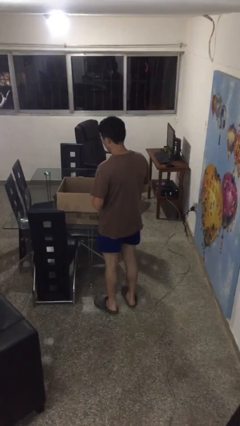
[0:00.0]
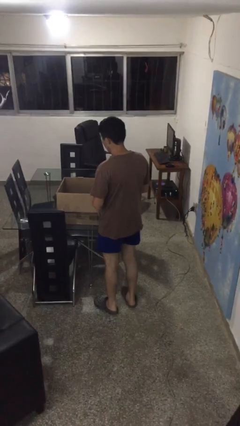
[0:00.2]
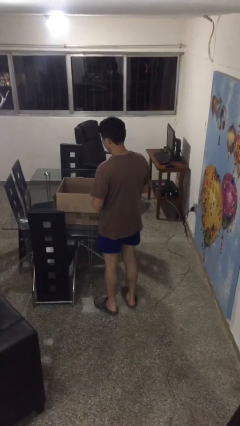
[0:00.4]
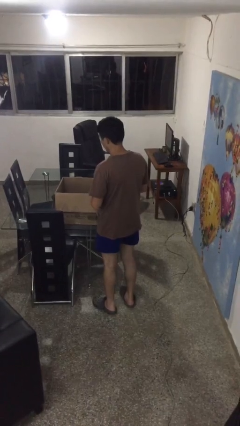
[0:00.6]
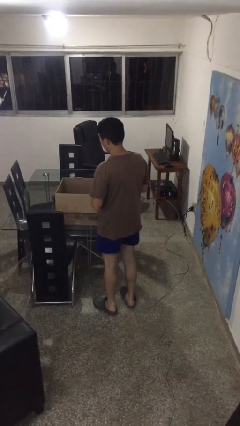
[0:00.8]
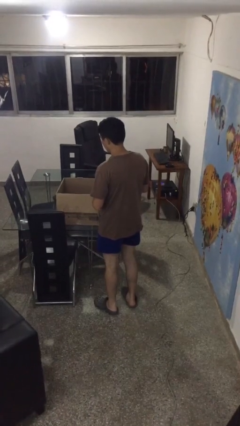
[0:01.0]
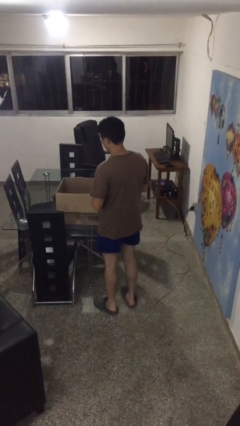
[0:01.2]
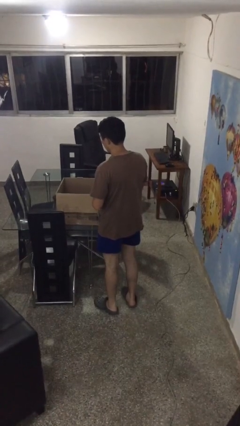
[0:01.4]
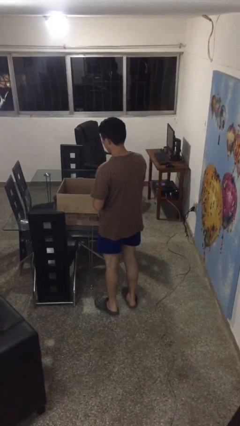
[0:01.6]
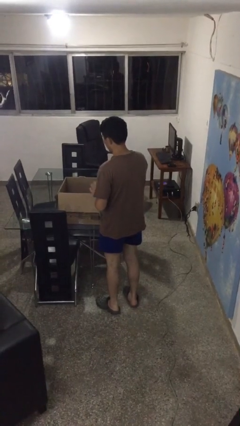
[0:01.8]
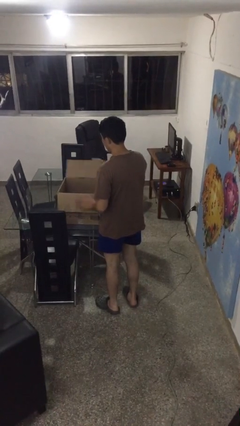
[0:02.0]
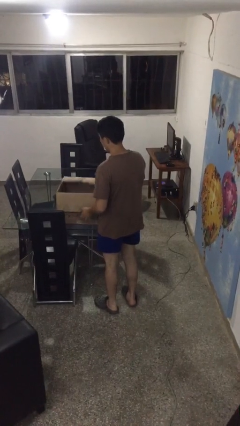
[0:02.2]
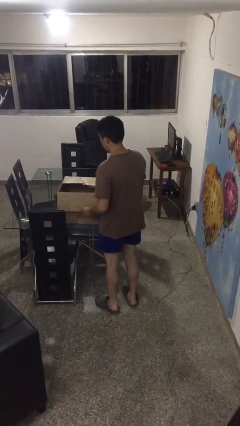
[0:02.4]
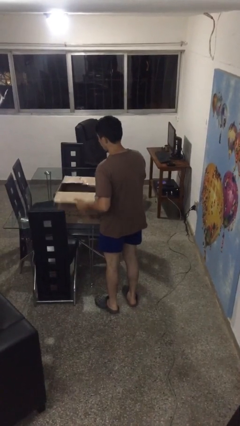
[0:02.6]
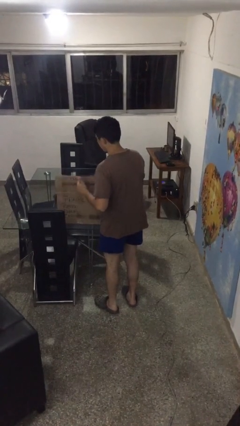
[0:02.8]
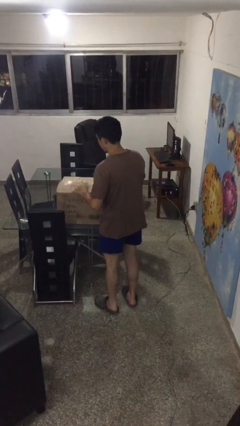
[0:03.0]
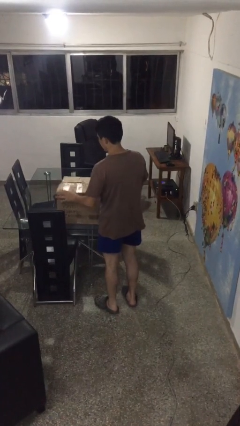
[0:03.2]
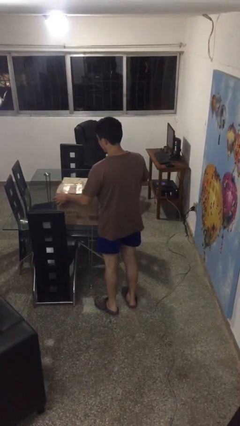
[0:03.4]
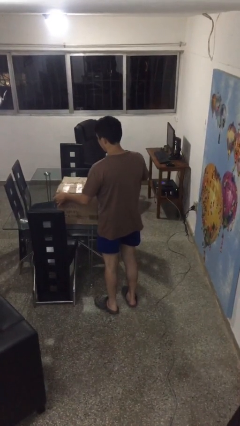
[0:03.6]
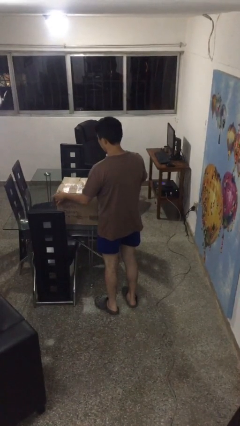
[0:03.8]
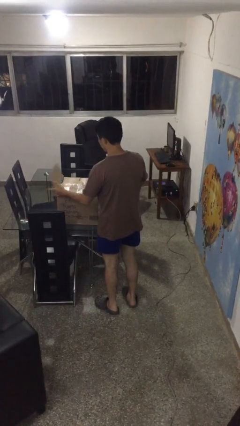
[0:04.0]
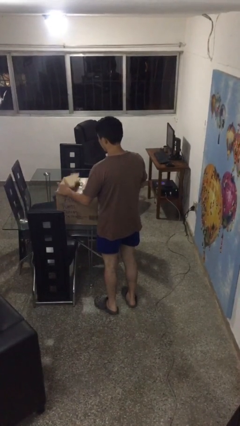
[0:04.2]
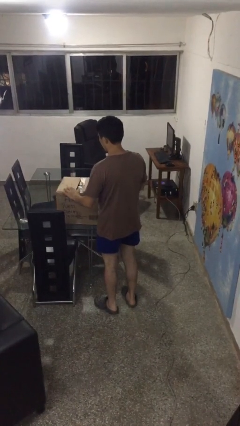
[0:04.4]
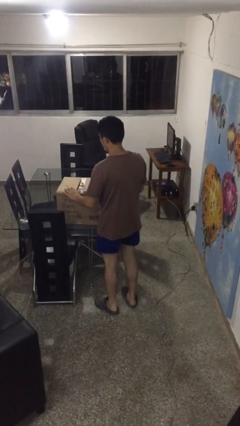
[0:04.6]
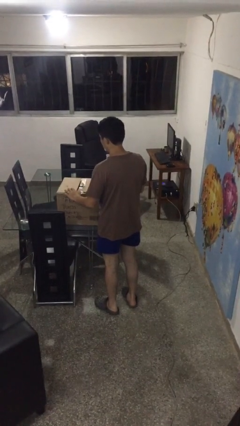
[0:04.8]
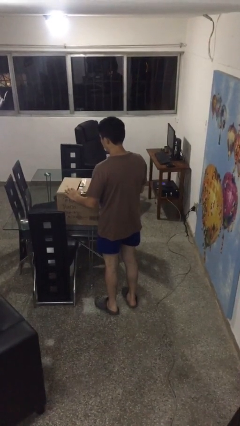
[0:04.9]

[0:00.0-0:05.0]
person closes box

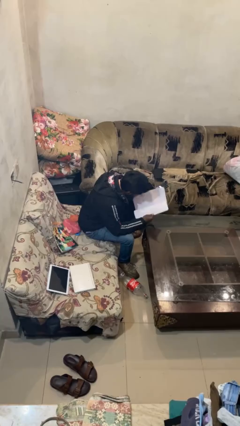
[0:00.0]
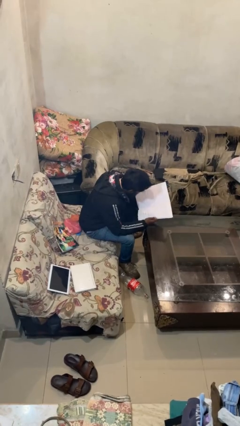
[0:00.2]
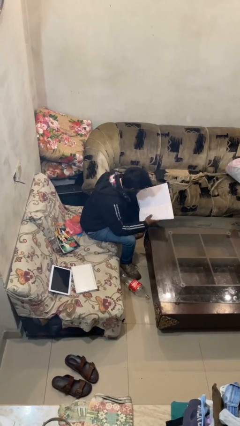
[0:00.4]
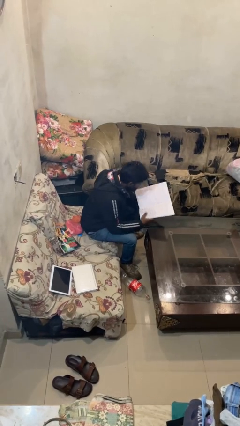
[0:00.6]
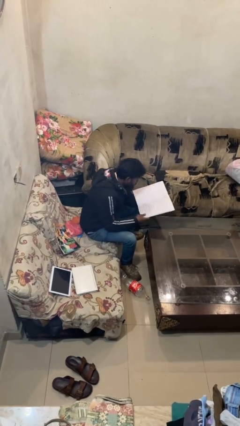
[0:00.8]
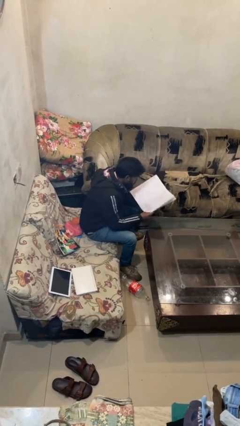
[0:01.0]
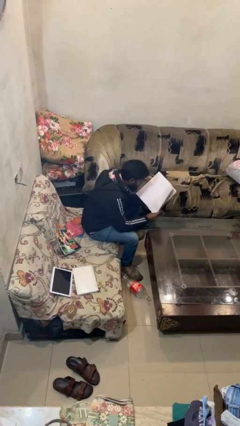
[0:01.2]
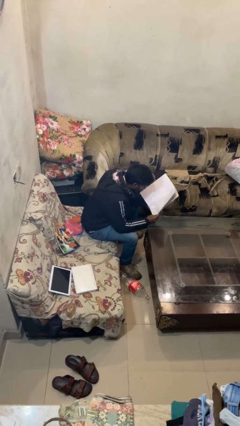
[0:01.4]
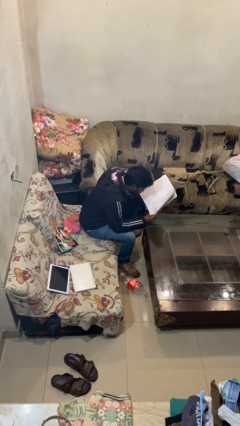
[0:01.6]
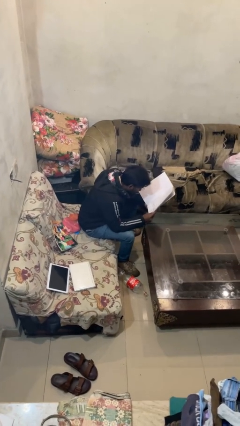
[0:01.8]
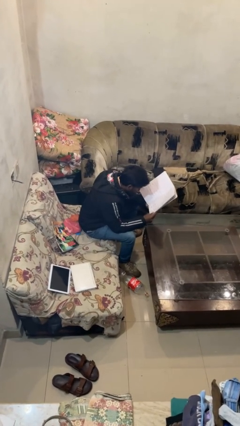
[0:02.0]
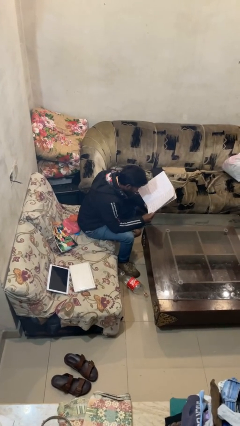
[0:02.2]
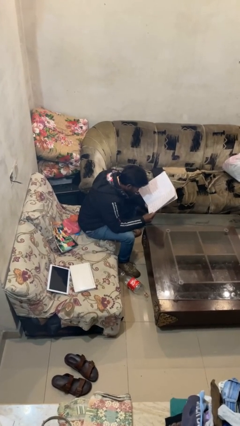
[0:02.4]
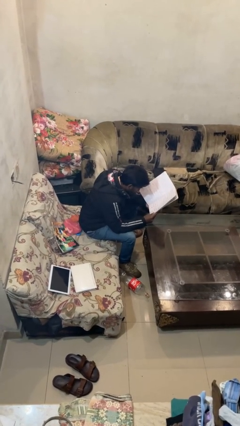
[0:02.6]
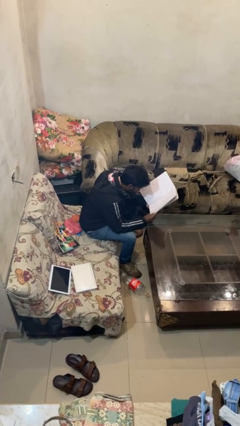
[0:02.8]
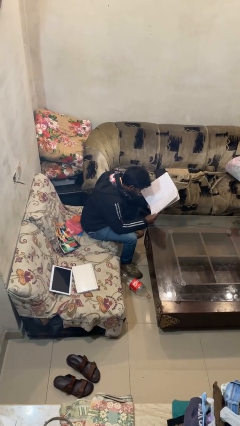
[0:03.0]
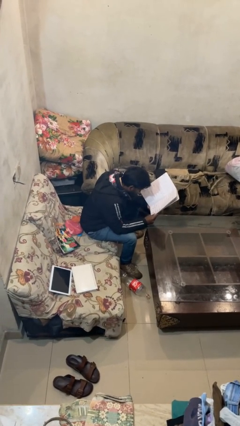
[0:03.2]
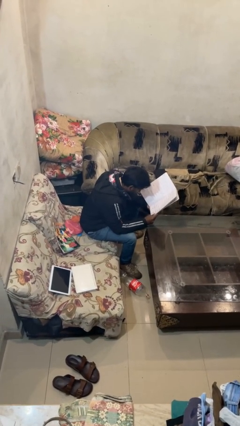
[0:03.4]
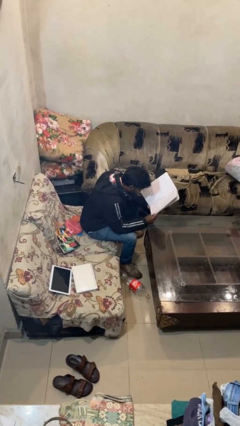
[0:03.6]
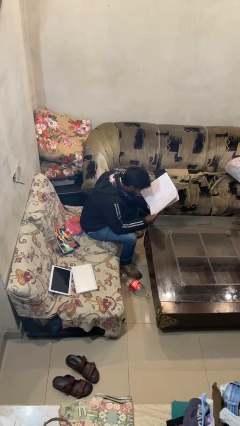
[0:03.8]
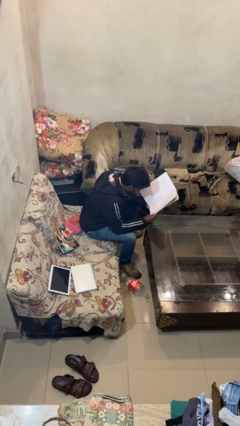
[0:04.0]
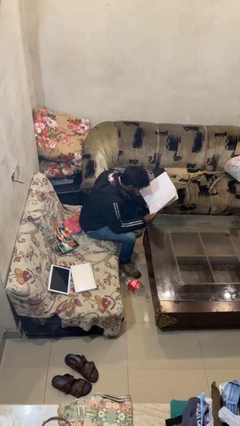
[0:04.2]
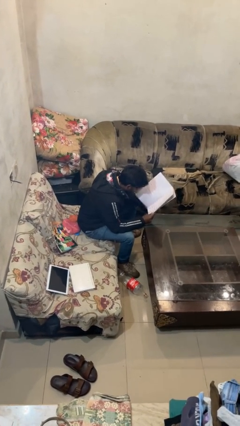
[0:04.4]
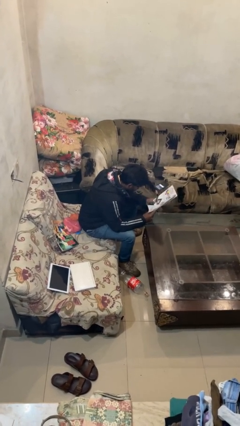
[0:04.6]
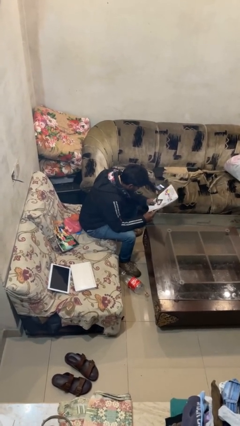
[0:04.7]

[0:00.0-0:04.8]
person reads document

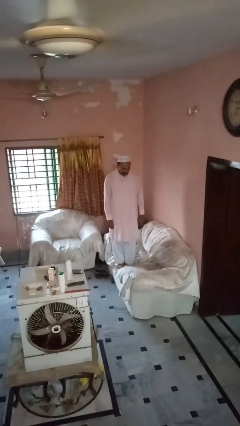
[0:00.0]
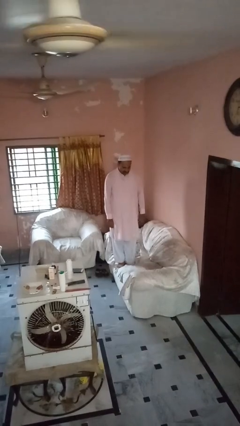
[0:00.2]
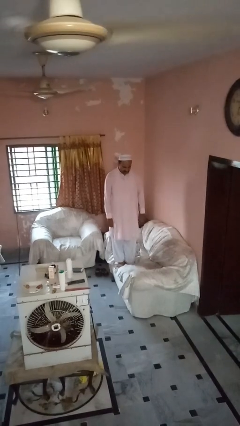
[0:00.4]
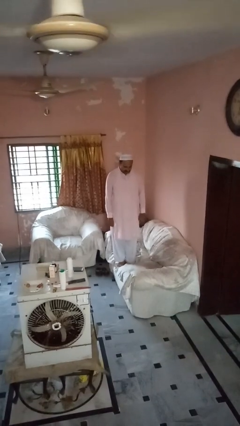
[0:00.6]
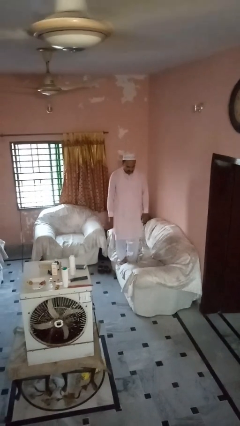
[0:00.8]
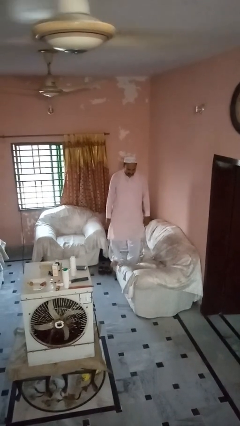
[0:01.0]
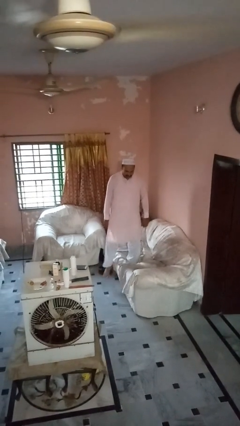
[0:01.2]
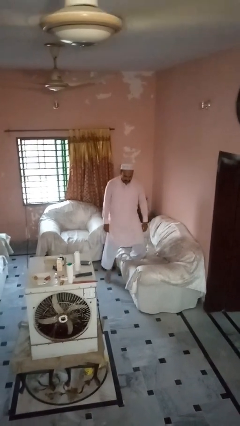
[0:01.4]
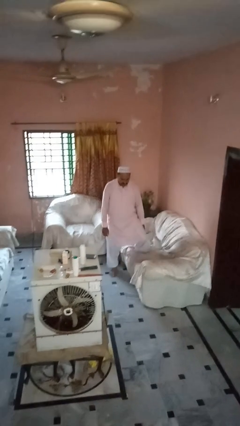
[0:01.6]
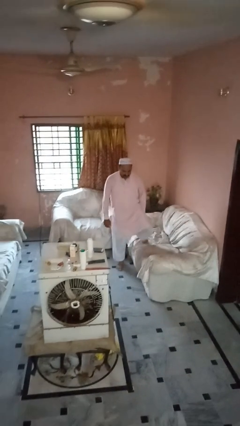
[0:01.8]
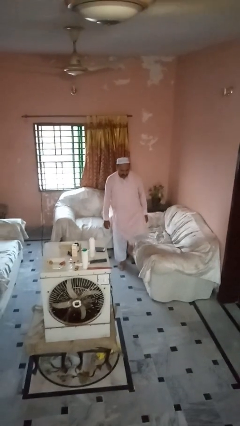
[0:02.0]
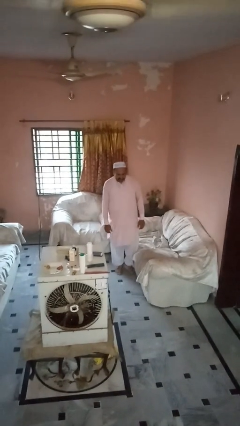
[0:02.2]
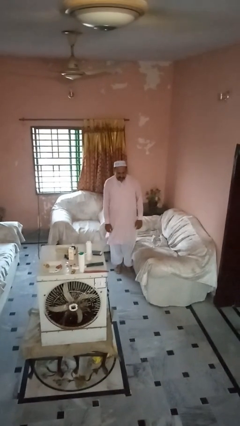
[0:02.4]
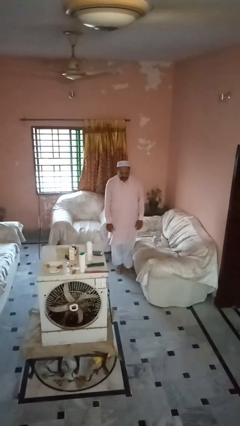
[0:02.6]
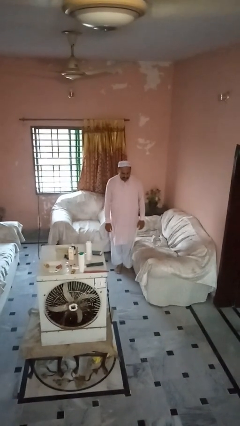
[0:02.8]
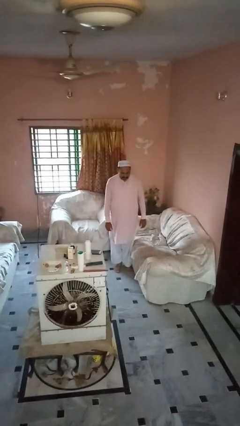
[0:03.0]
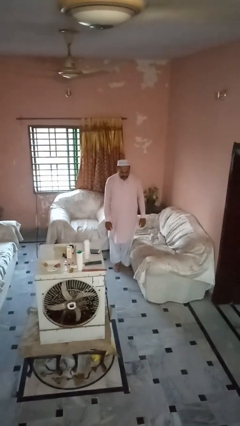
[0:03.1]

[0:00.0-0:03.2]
person climbs off couch

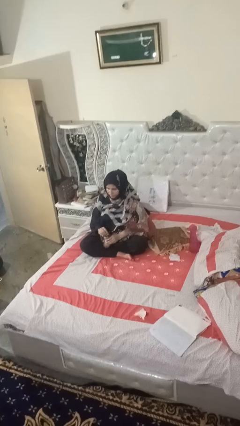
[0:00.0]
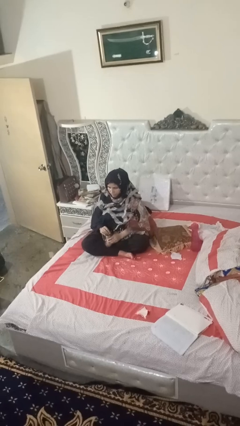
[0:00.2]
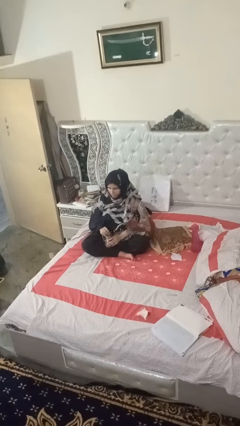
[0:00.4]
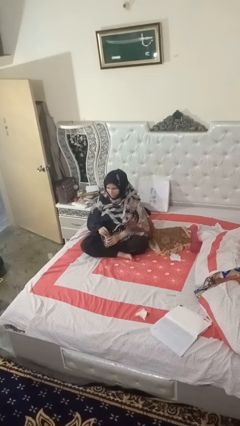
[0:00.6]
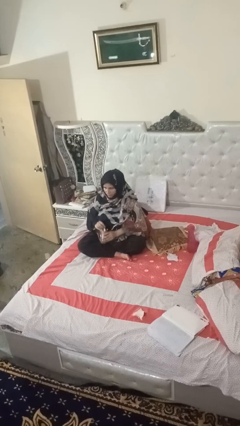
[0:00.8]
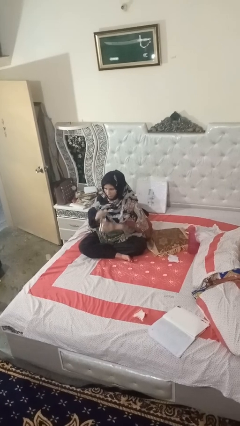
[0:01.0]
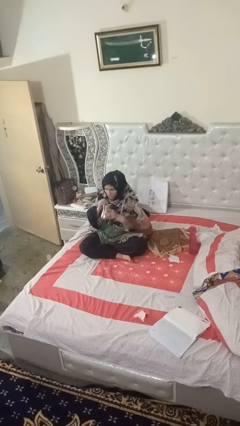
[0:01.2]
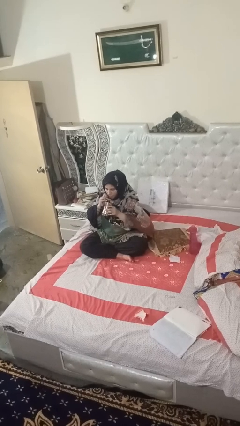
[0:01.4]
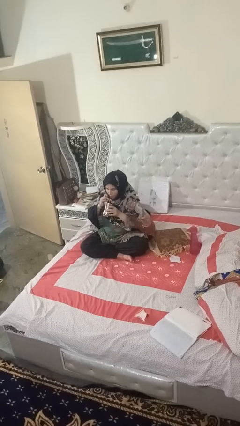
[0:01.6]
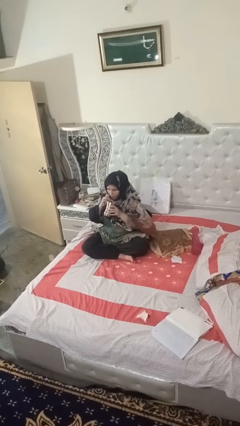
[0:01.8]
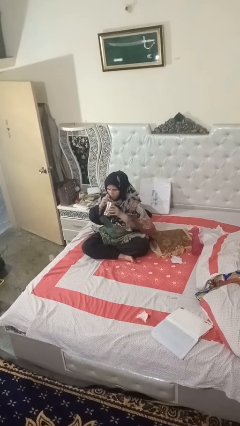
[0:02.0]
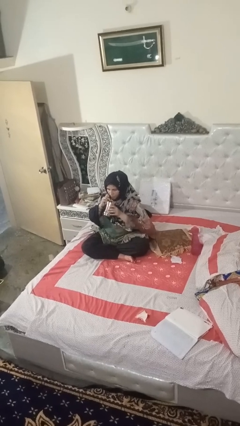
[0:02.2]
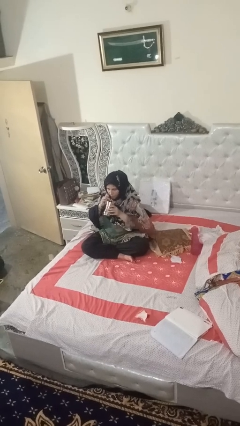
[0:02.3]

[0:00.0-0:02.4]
person drinks from straw

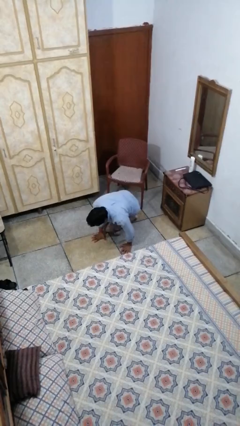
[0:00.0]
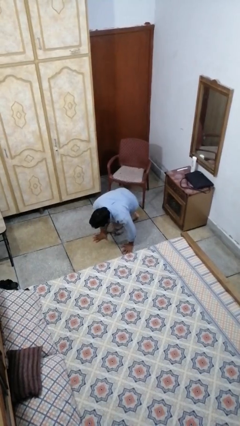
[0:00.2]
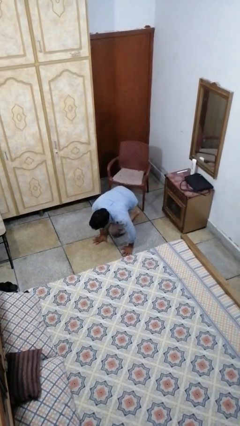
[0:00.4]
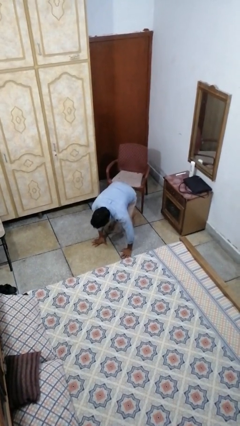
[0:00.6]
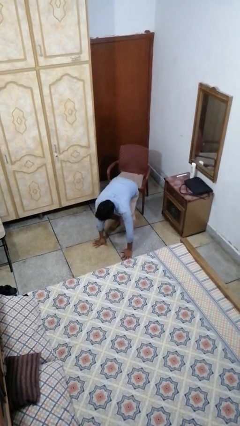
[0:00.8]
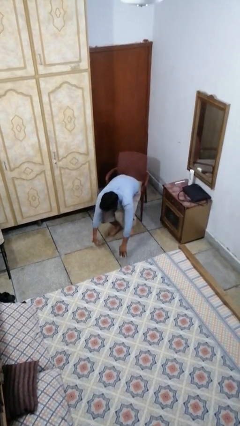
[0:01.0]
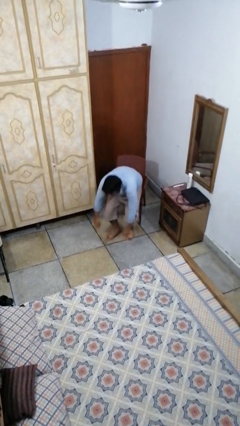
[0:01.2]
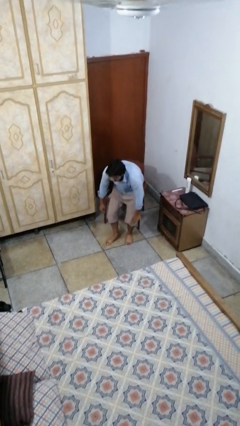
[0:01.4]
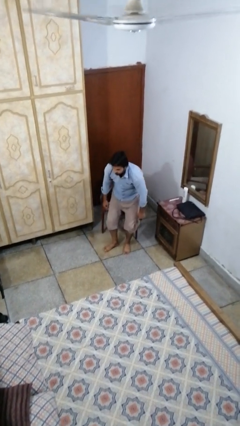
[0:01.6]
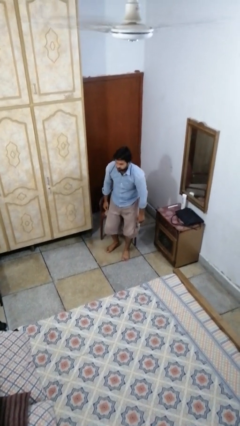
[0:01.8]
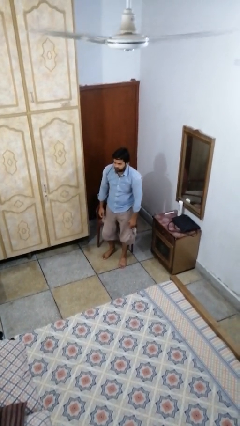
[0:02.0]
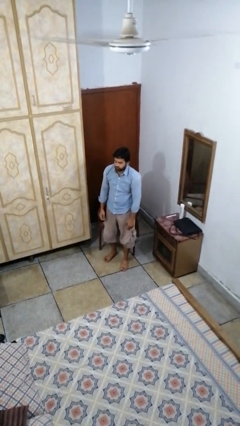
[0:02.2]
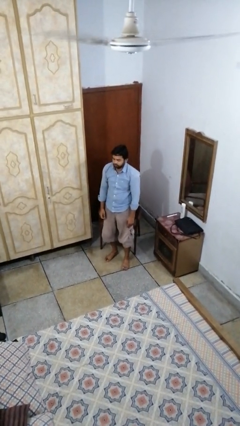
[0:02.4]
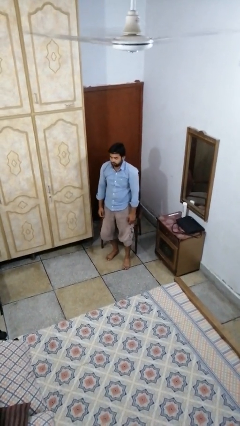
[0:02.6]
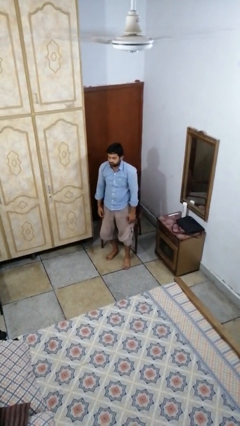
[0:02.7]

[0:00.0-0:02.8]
person stands up from floor
